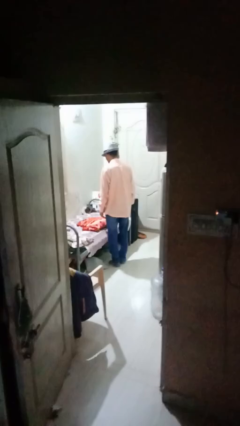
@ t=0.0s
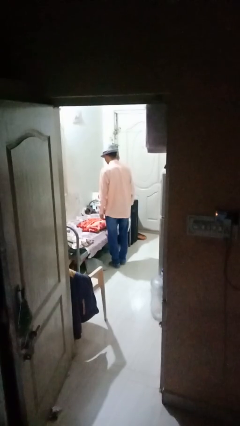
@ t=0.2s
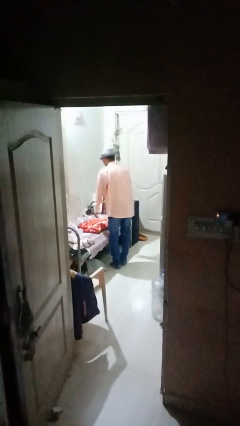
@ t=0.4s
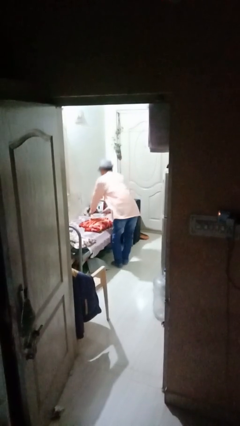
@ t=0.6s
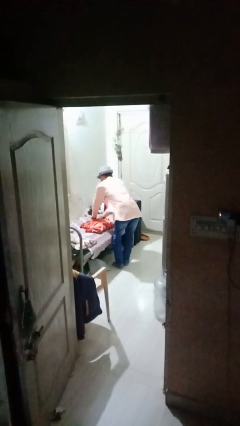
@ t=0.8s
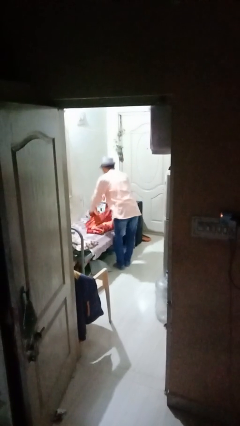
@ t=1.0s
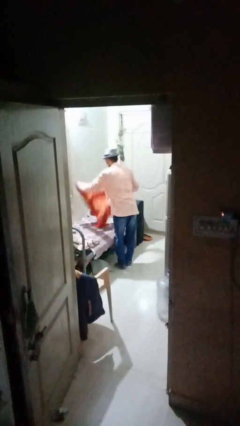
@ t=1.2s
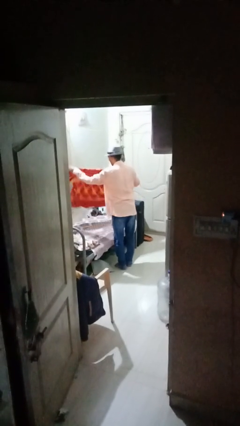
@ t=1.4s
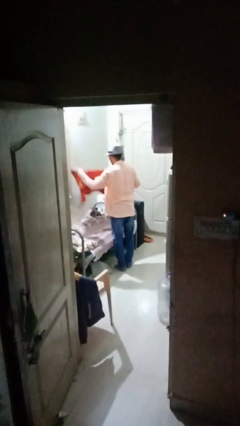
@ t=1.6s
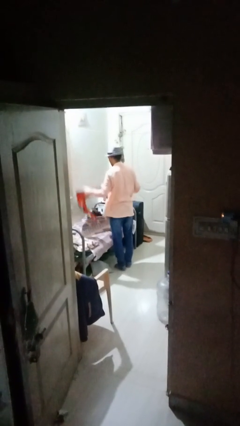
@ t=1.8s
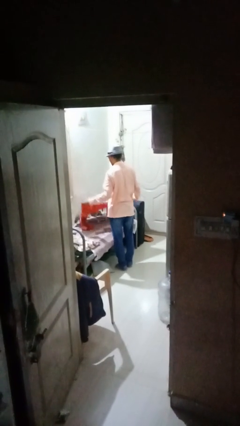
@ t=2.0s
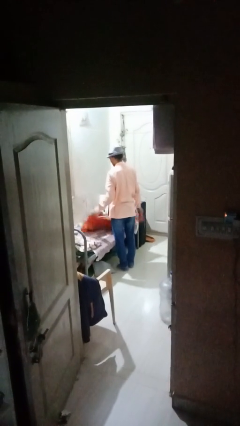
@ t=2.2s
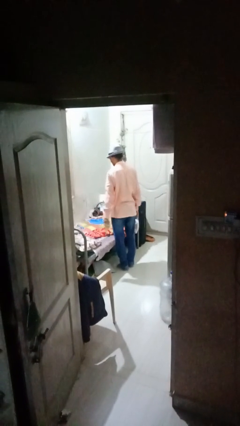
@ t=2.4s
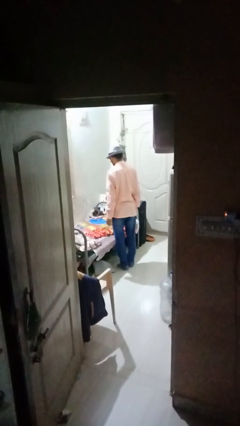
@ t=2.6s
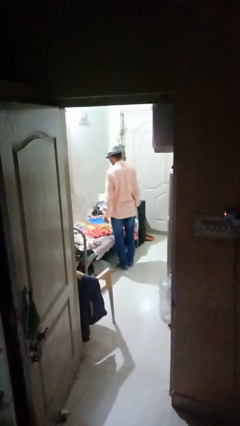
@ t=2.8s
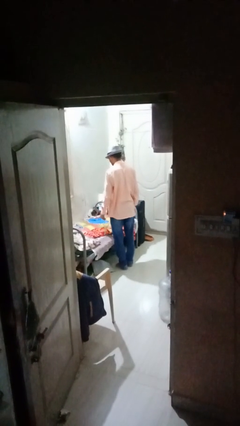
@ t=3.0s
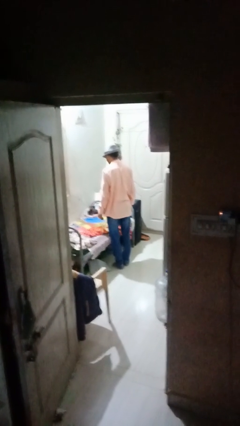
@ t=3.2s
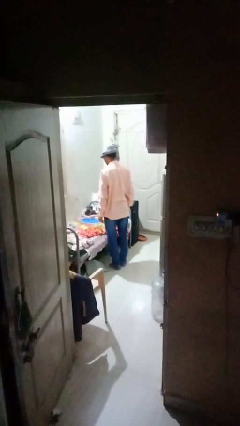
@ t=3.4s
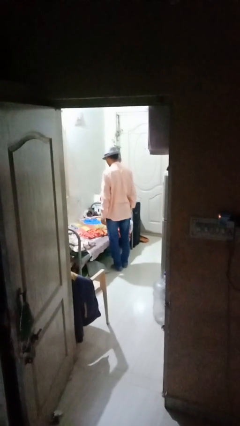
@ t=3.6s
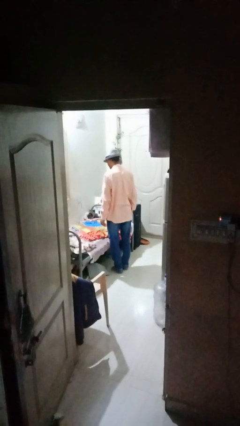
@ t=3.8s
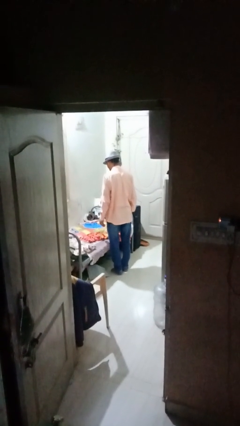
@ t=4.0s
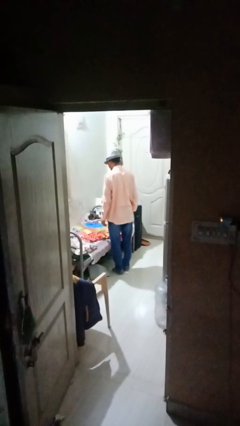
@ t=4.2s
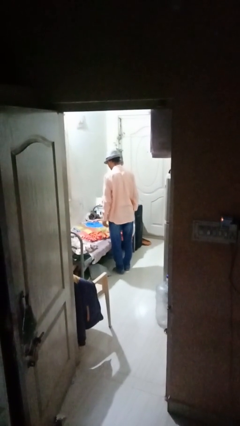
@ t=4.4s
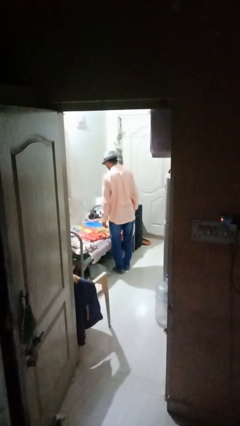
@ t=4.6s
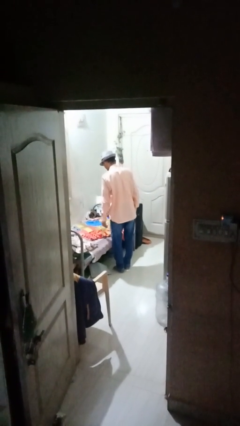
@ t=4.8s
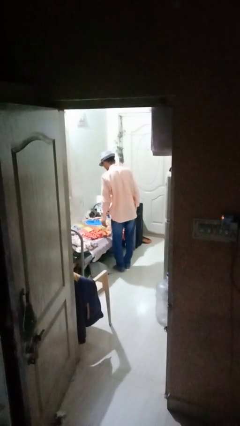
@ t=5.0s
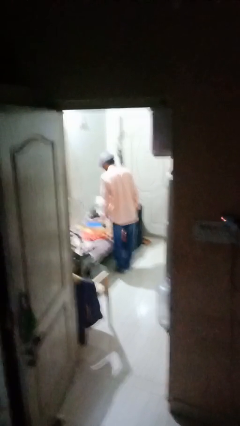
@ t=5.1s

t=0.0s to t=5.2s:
person unfolds blanket

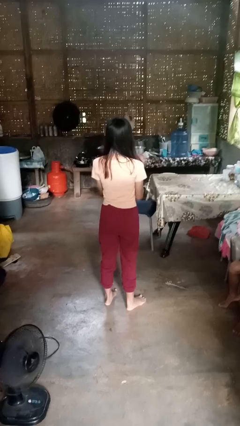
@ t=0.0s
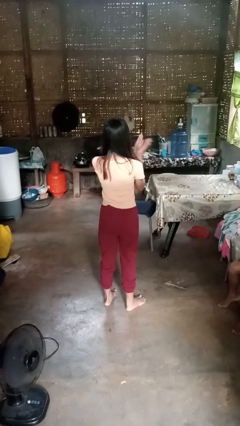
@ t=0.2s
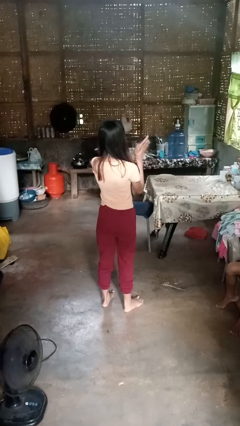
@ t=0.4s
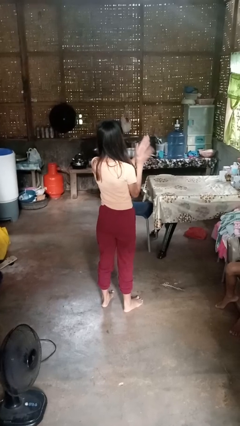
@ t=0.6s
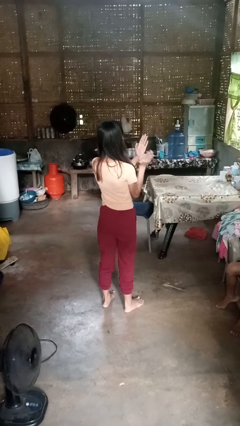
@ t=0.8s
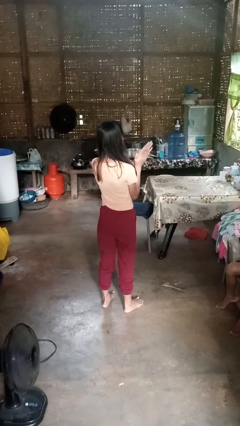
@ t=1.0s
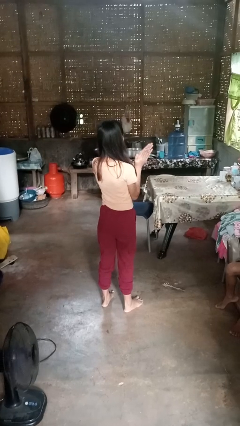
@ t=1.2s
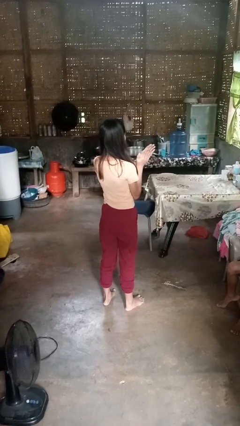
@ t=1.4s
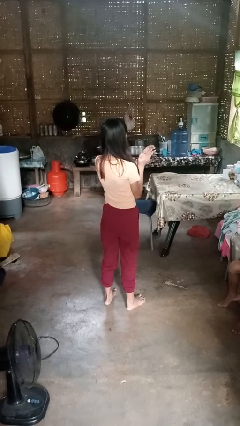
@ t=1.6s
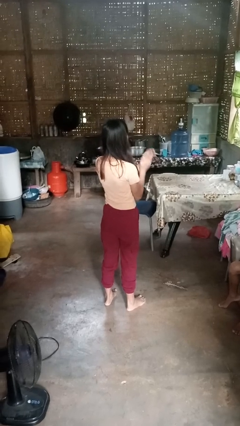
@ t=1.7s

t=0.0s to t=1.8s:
person claps hands

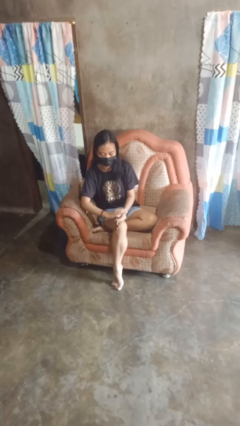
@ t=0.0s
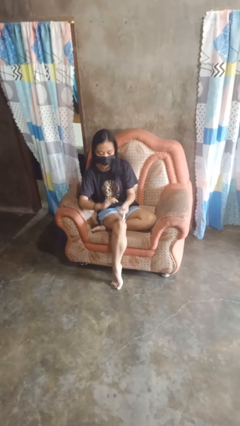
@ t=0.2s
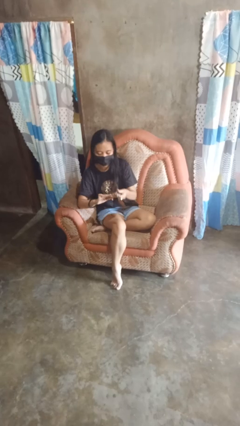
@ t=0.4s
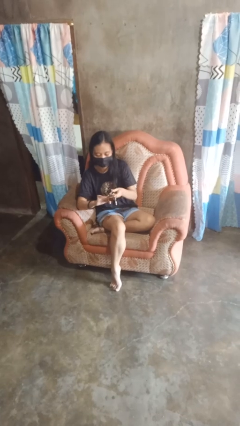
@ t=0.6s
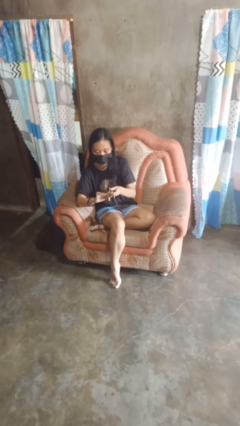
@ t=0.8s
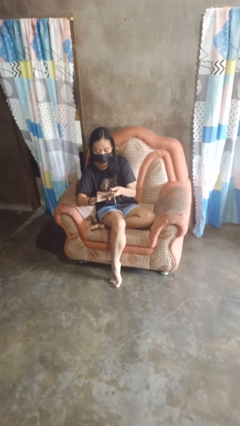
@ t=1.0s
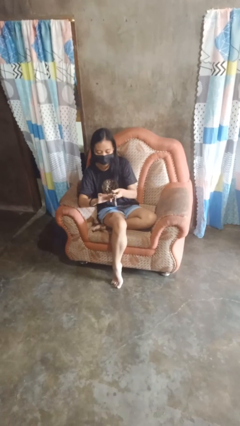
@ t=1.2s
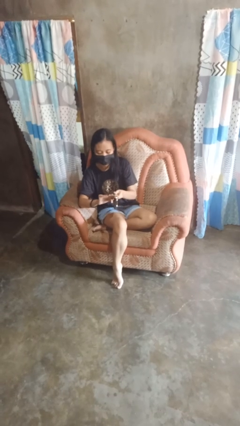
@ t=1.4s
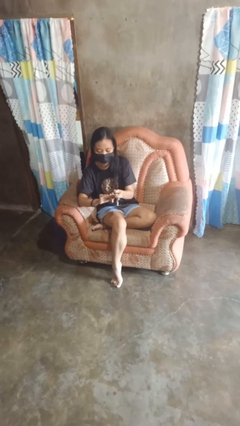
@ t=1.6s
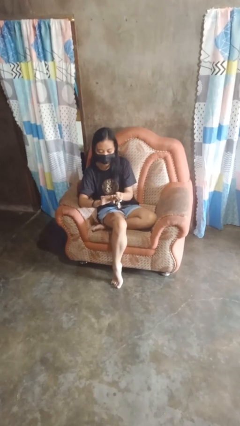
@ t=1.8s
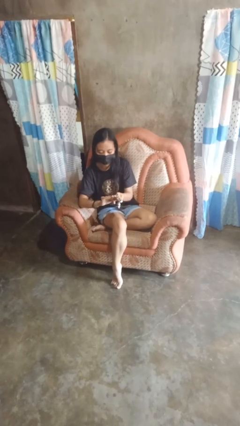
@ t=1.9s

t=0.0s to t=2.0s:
person clips fingernails

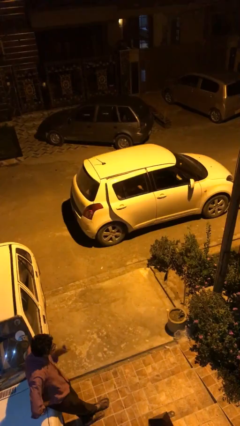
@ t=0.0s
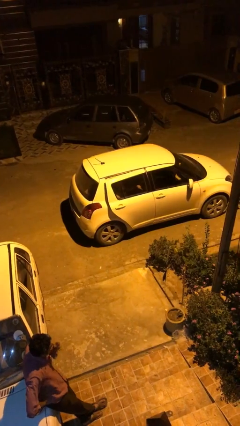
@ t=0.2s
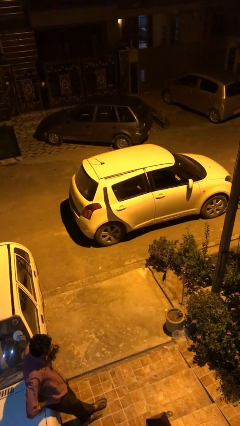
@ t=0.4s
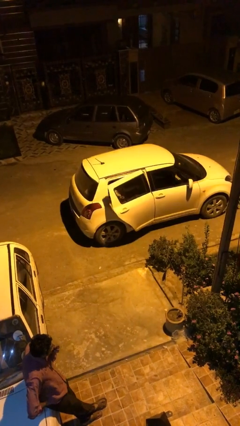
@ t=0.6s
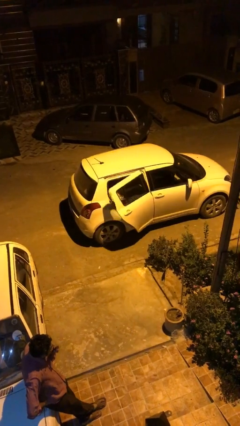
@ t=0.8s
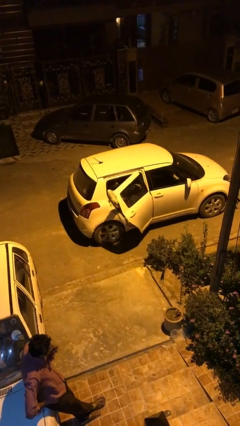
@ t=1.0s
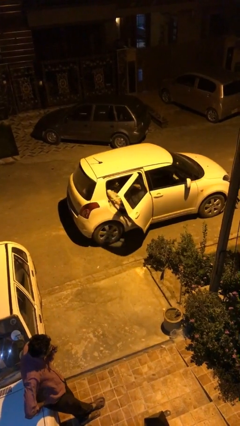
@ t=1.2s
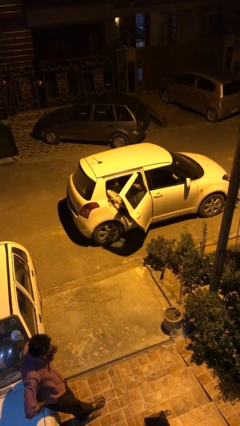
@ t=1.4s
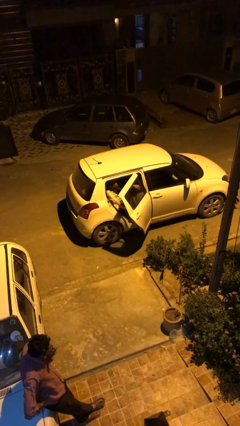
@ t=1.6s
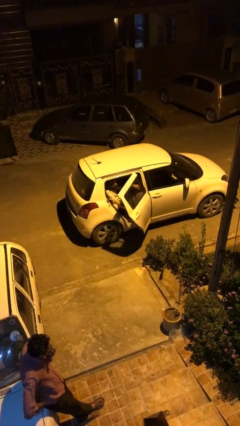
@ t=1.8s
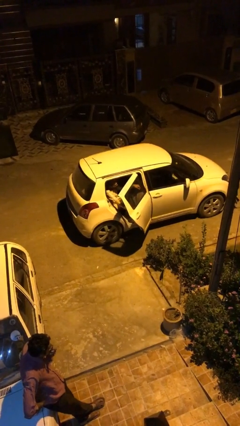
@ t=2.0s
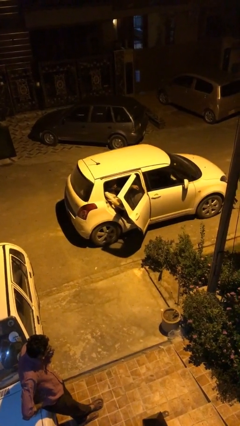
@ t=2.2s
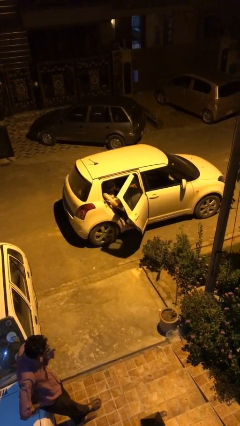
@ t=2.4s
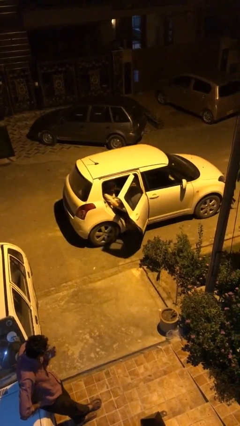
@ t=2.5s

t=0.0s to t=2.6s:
person opens car door

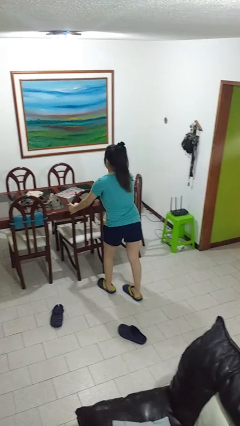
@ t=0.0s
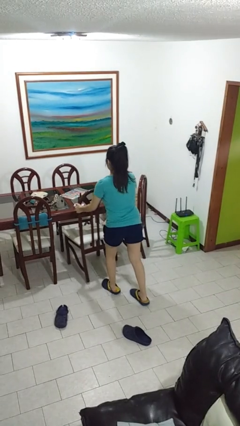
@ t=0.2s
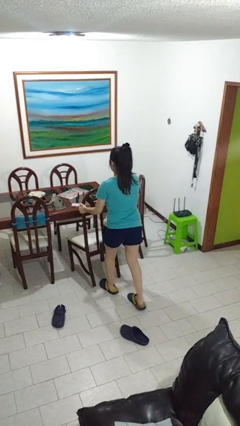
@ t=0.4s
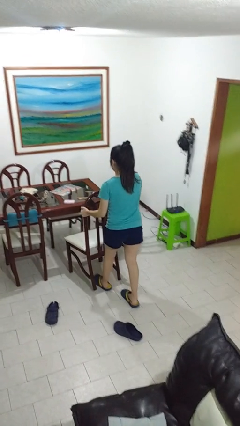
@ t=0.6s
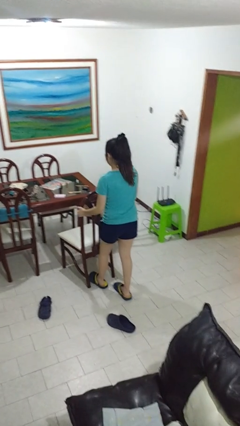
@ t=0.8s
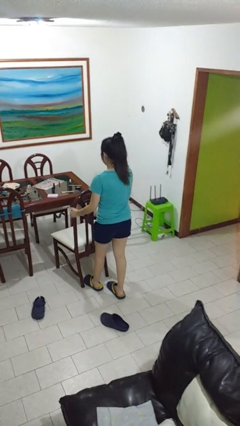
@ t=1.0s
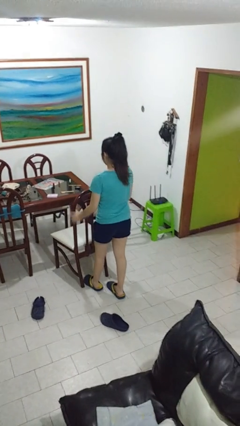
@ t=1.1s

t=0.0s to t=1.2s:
person pulls out chair

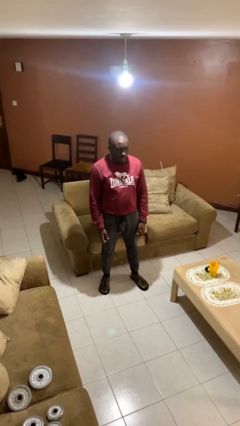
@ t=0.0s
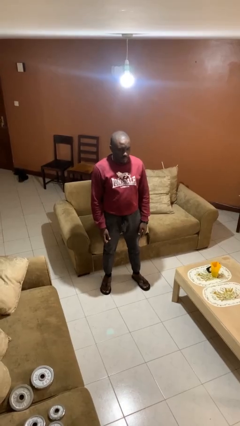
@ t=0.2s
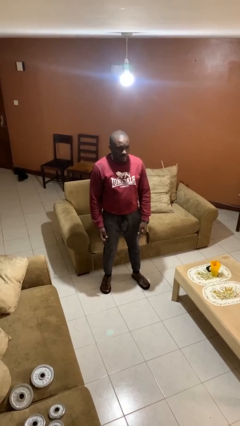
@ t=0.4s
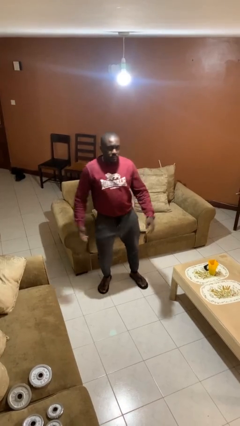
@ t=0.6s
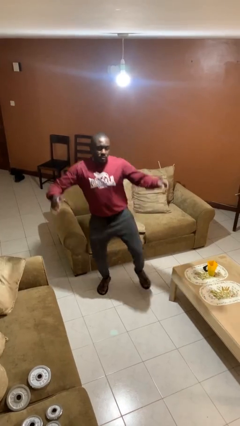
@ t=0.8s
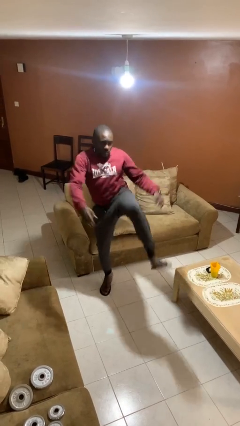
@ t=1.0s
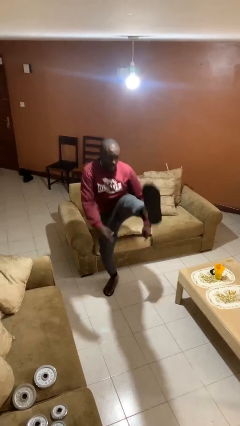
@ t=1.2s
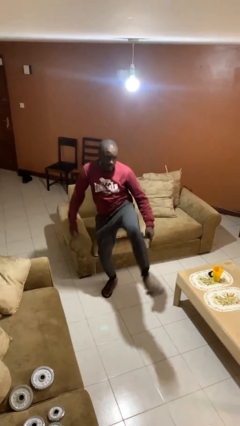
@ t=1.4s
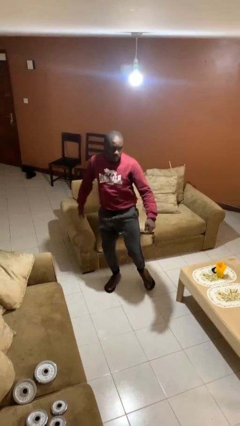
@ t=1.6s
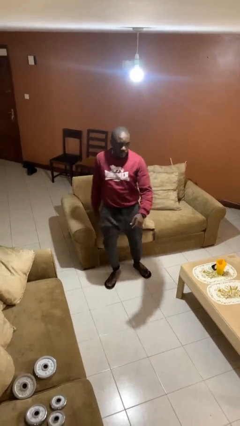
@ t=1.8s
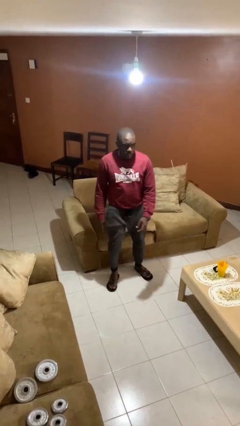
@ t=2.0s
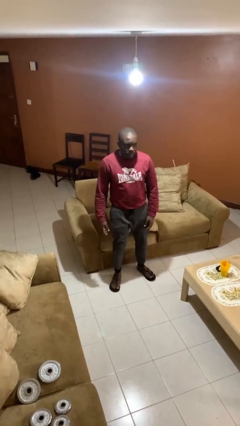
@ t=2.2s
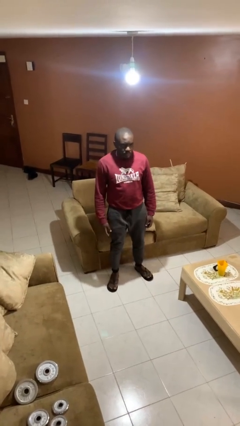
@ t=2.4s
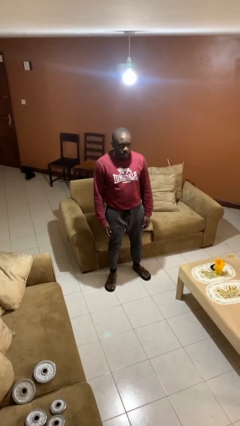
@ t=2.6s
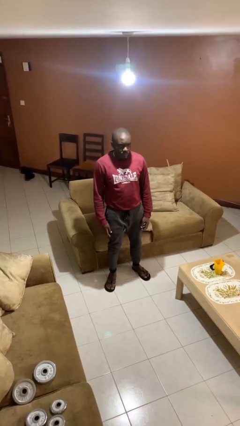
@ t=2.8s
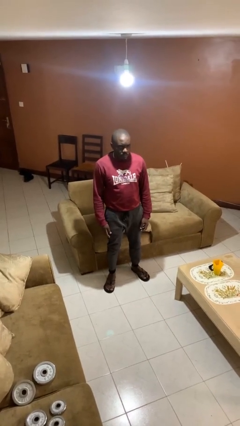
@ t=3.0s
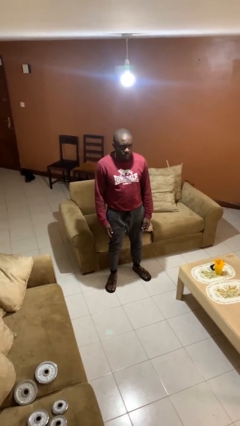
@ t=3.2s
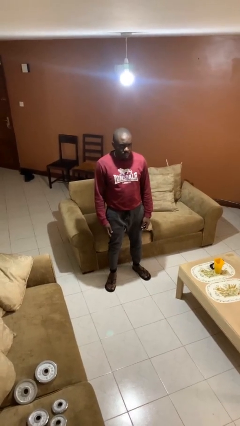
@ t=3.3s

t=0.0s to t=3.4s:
person karate kicks

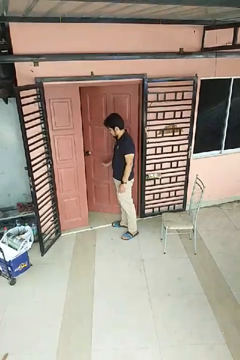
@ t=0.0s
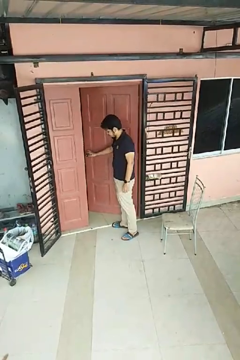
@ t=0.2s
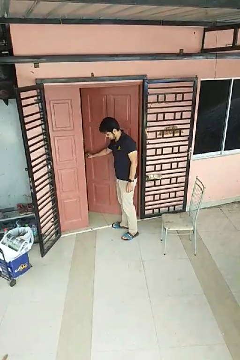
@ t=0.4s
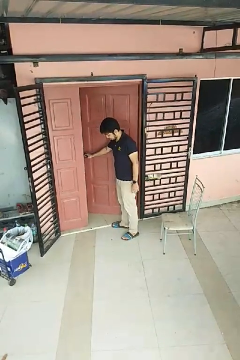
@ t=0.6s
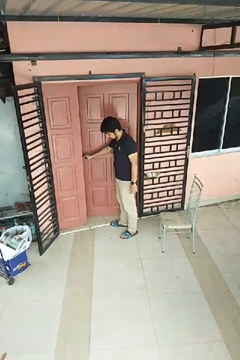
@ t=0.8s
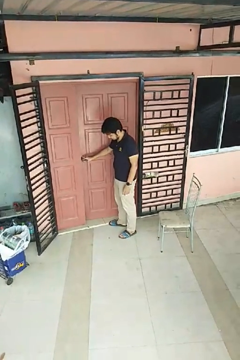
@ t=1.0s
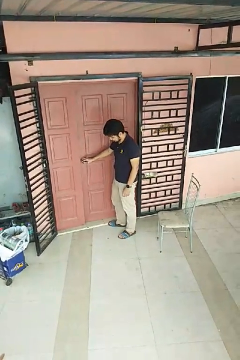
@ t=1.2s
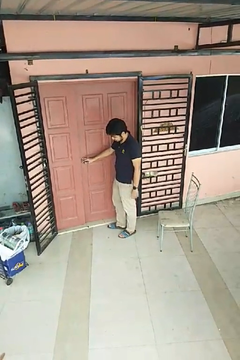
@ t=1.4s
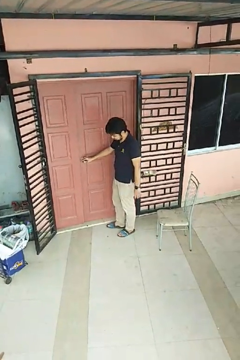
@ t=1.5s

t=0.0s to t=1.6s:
person closes door with foot
